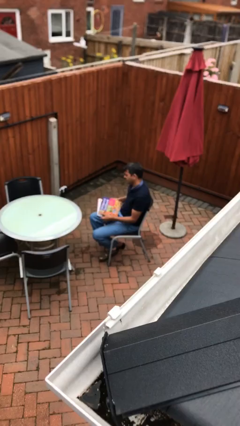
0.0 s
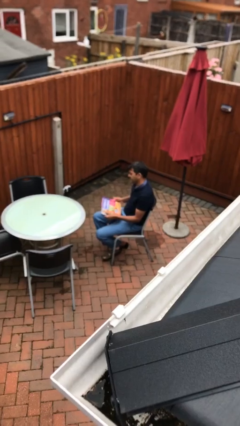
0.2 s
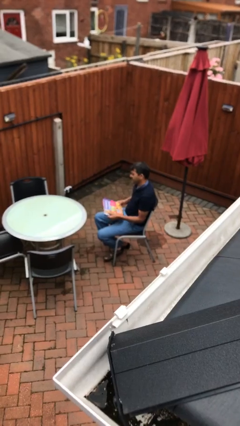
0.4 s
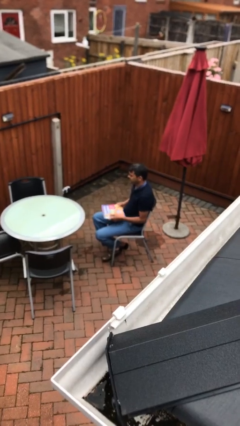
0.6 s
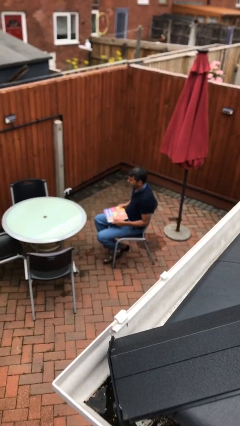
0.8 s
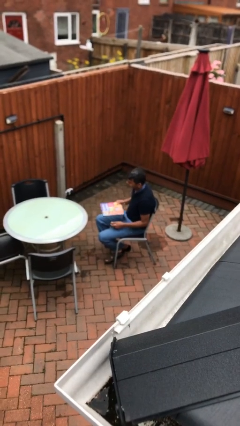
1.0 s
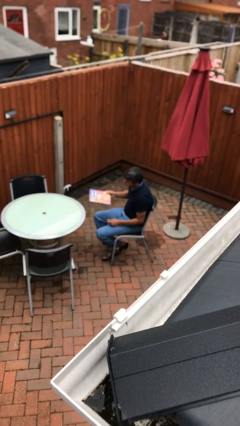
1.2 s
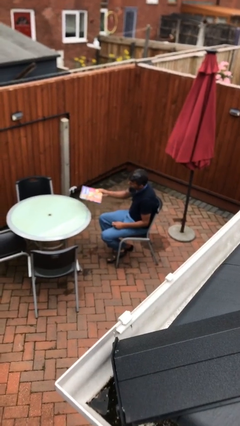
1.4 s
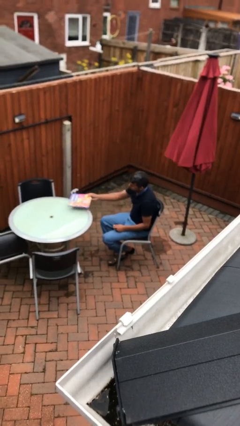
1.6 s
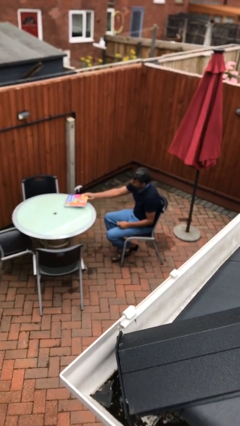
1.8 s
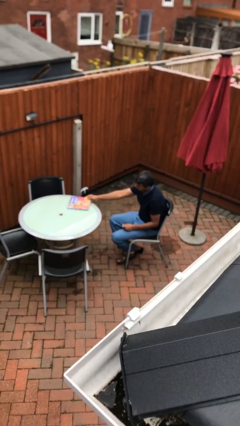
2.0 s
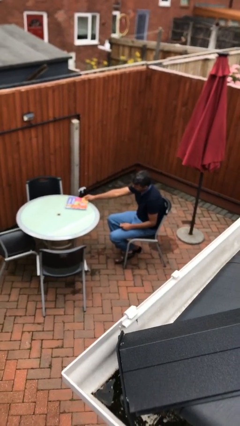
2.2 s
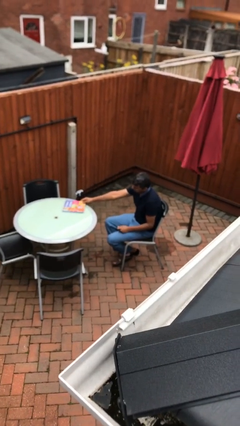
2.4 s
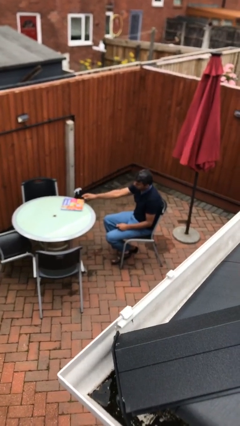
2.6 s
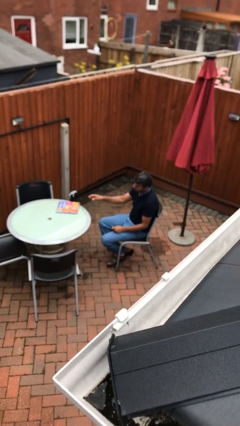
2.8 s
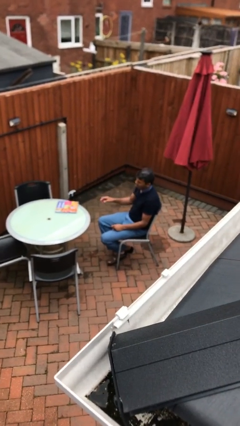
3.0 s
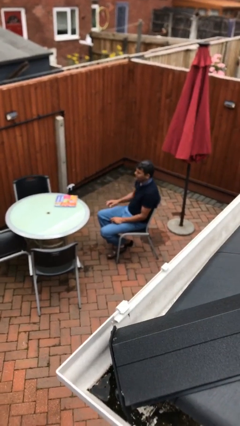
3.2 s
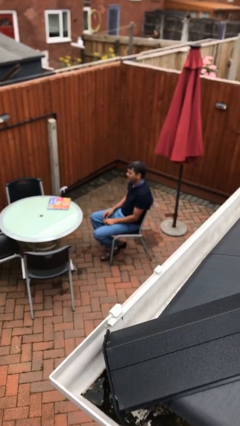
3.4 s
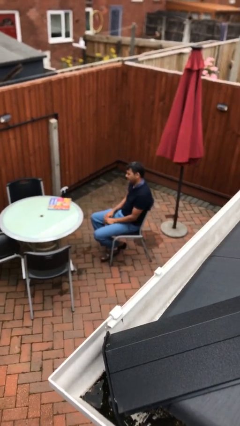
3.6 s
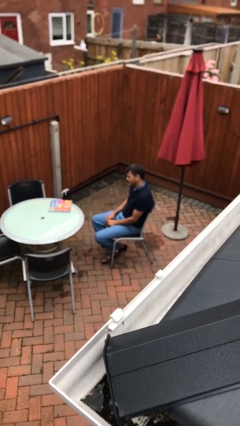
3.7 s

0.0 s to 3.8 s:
person puts down object on table

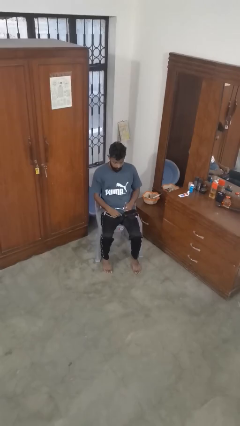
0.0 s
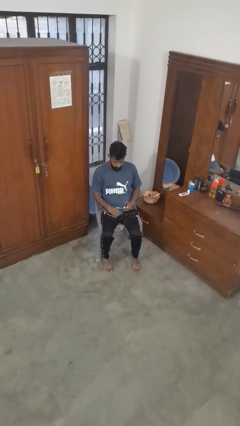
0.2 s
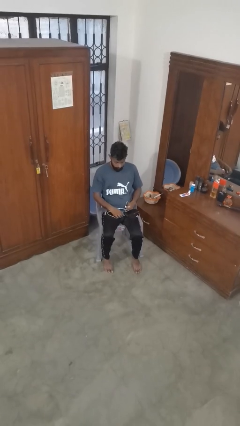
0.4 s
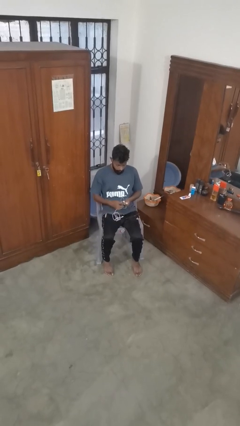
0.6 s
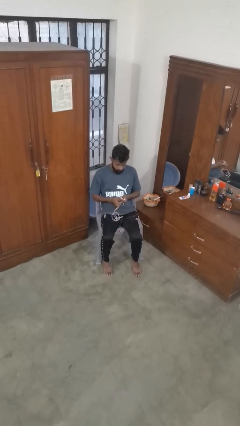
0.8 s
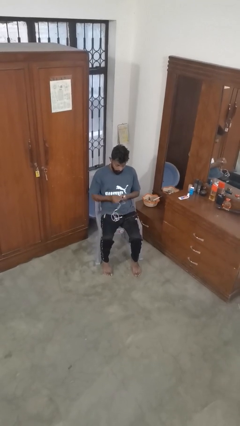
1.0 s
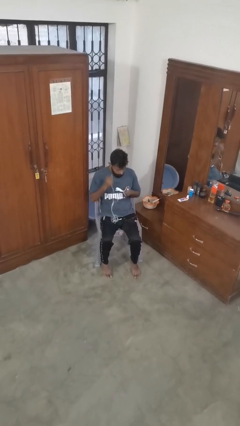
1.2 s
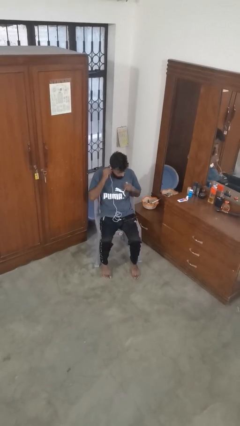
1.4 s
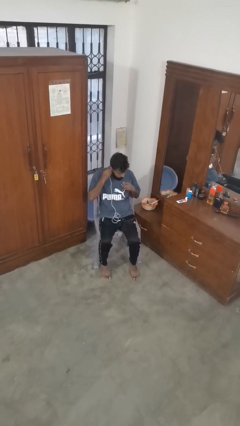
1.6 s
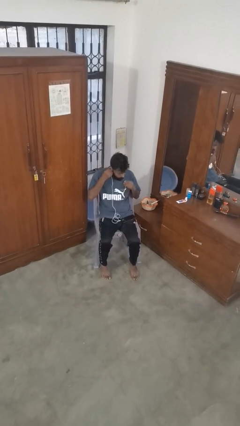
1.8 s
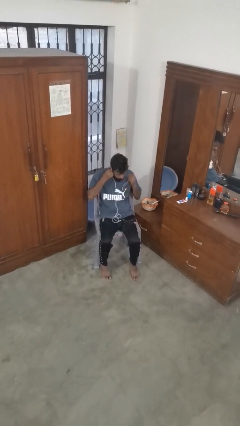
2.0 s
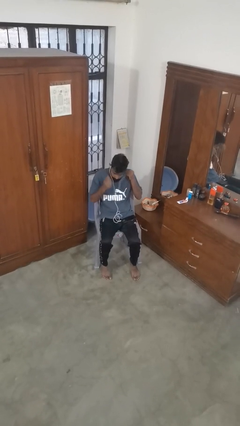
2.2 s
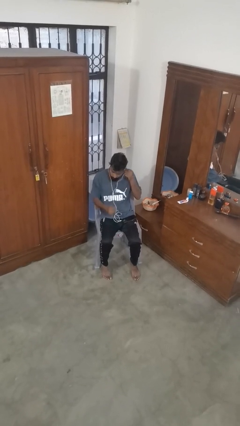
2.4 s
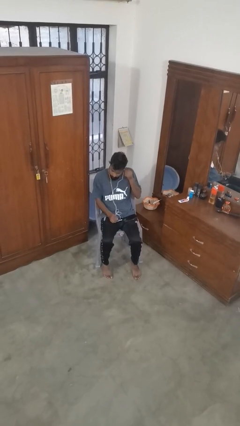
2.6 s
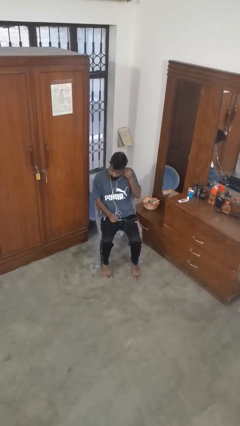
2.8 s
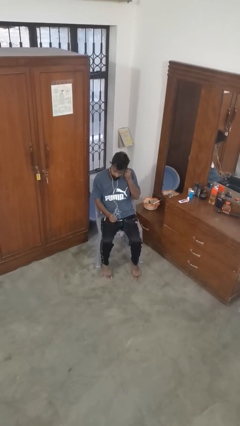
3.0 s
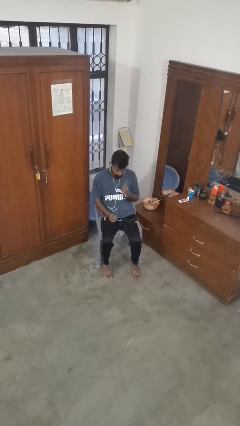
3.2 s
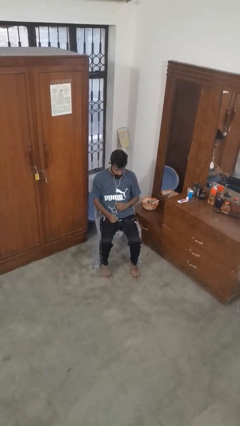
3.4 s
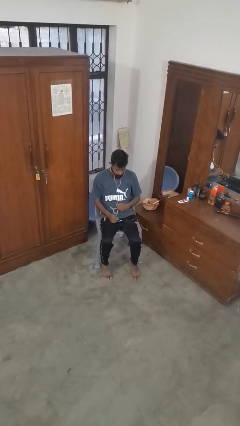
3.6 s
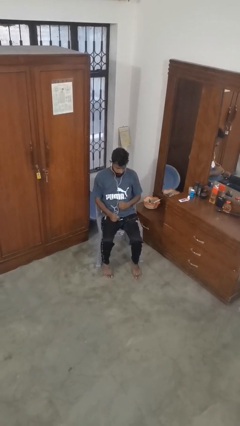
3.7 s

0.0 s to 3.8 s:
person puts on headphones

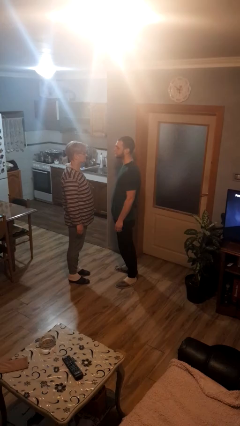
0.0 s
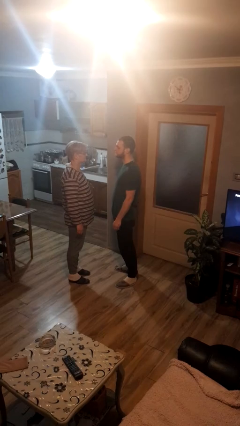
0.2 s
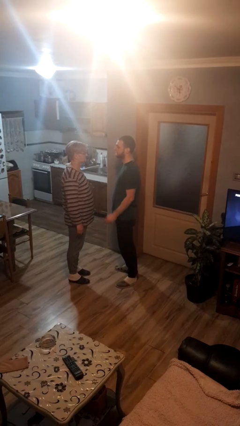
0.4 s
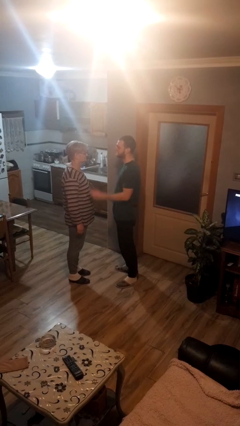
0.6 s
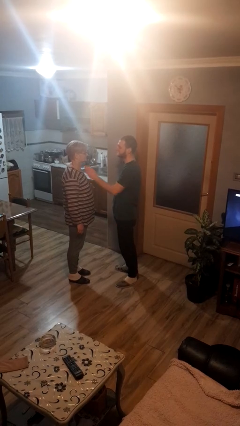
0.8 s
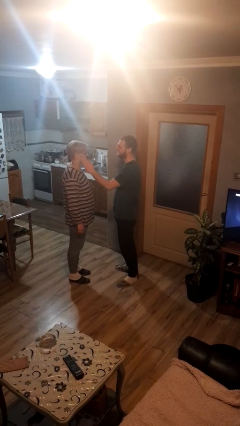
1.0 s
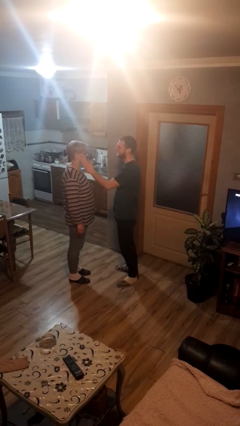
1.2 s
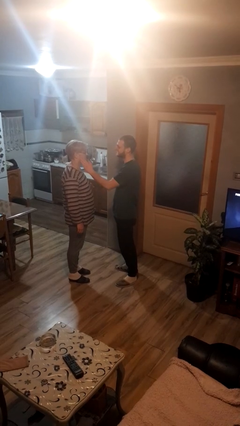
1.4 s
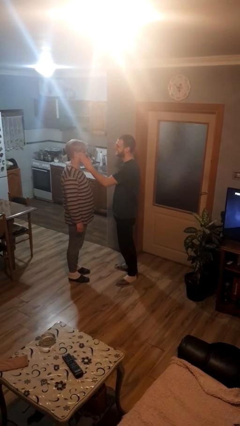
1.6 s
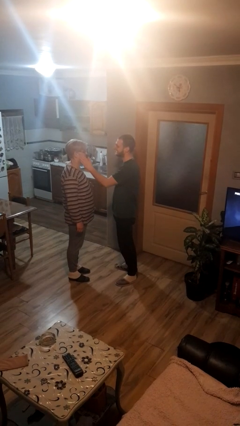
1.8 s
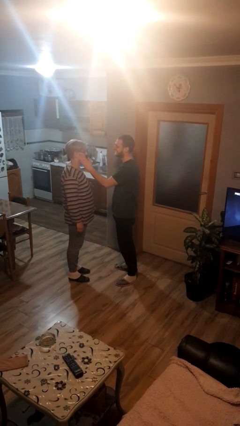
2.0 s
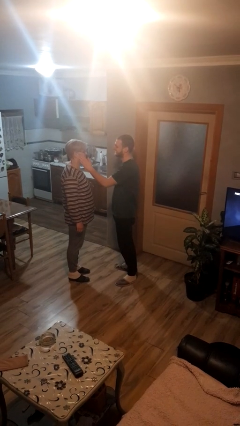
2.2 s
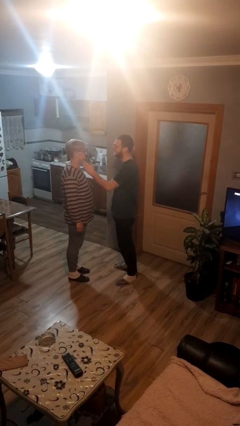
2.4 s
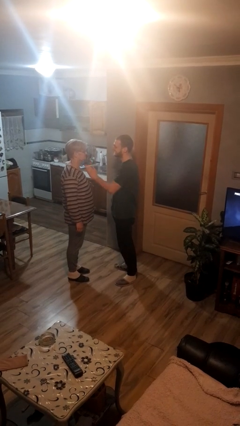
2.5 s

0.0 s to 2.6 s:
person touches face of person

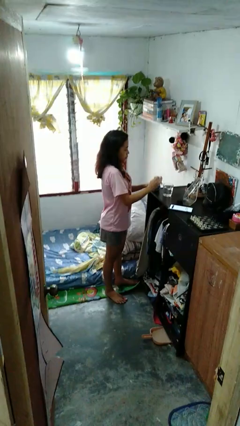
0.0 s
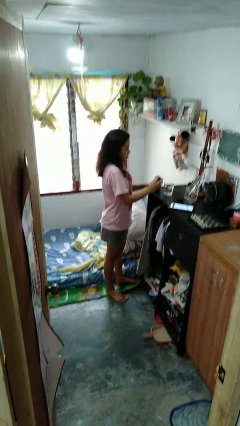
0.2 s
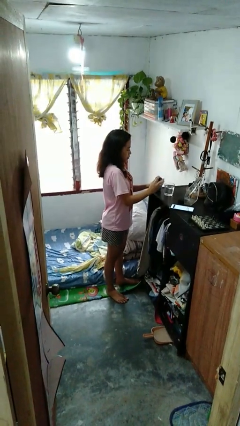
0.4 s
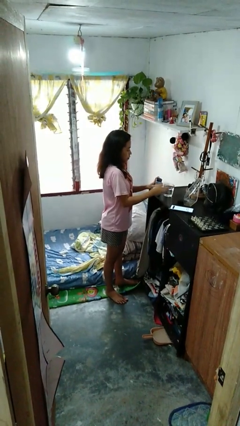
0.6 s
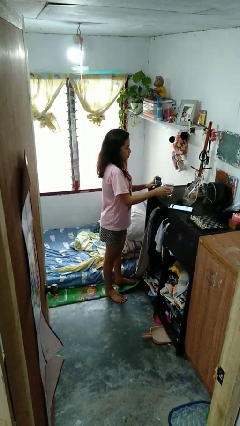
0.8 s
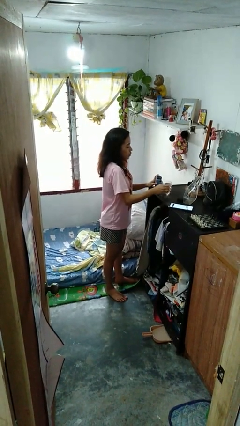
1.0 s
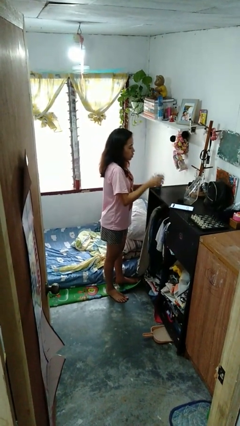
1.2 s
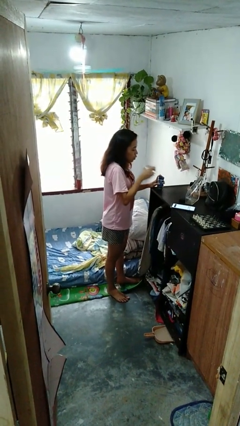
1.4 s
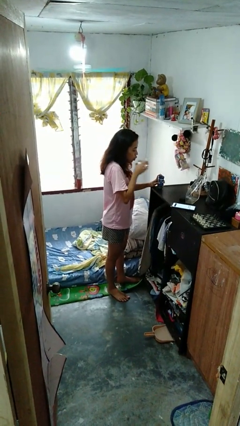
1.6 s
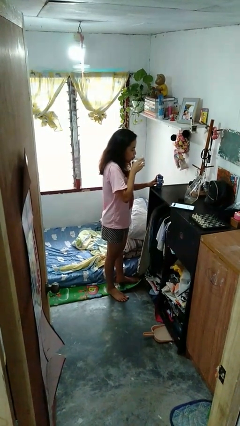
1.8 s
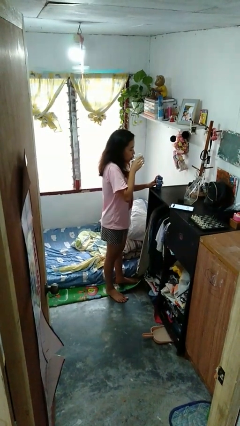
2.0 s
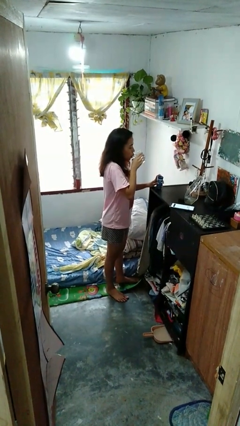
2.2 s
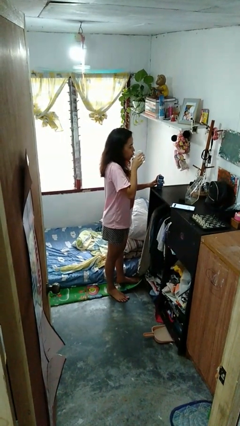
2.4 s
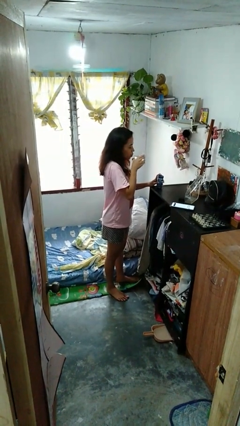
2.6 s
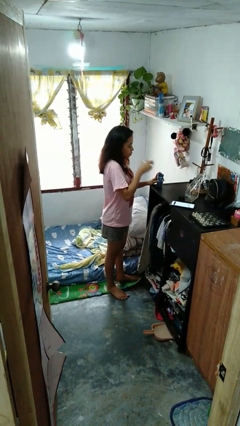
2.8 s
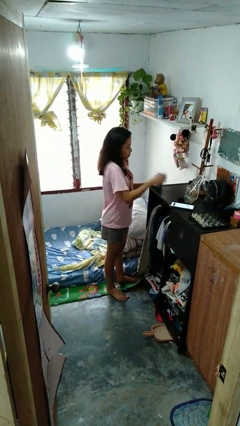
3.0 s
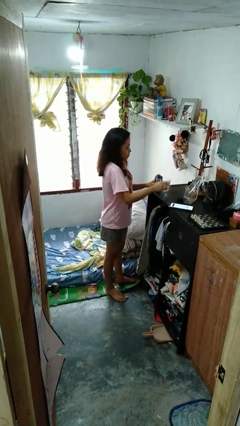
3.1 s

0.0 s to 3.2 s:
person drinks from cup

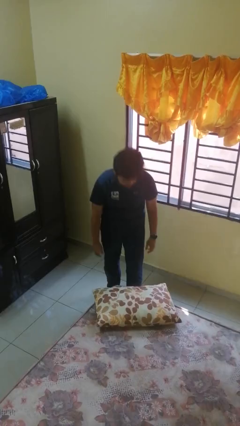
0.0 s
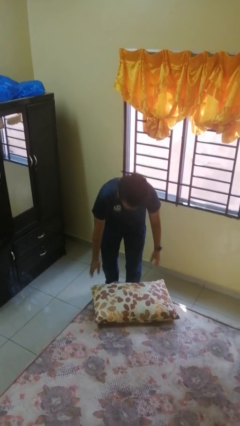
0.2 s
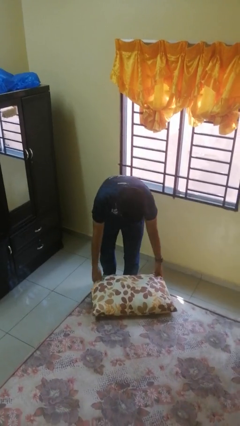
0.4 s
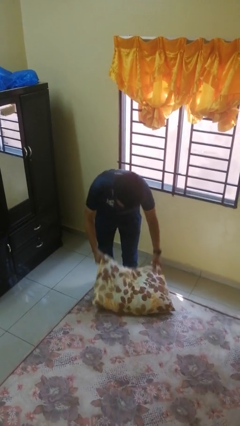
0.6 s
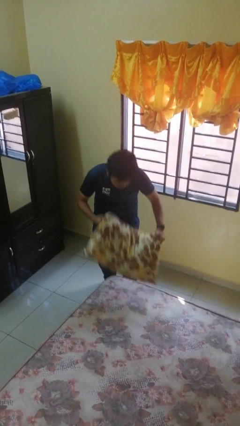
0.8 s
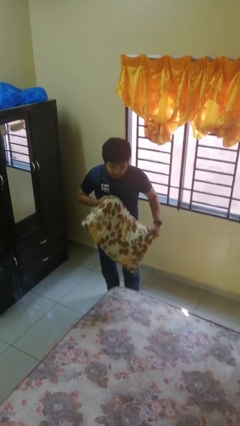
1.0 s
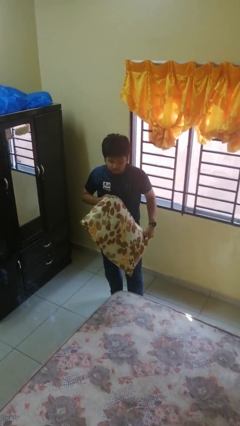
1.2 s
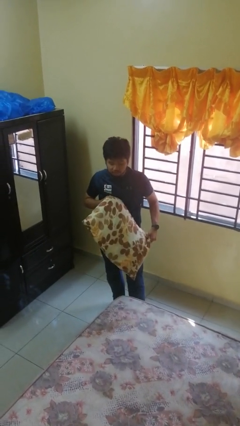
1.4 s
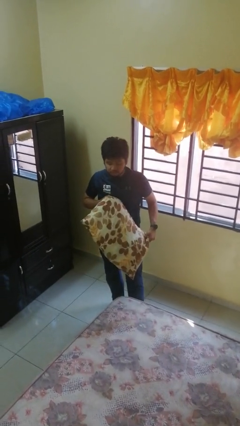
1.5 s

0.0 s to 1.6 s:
person picks up object from bed

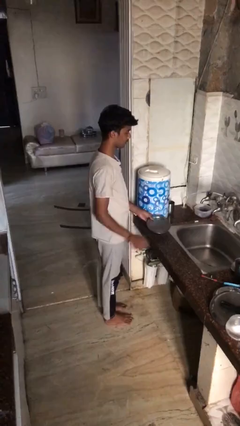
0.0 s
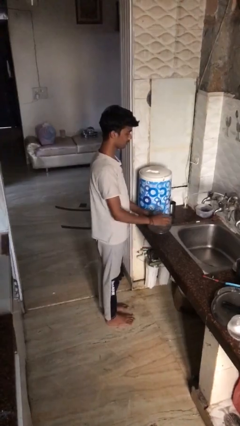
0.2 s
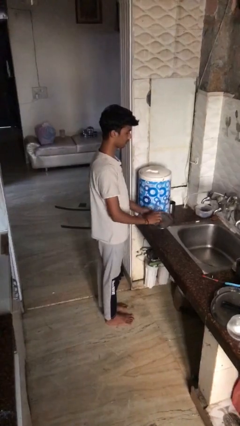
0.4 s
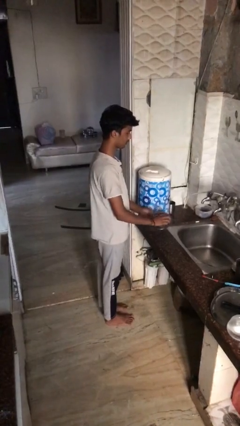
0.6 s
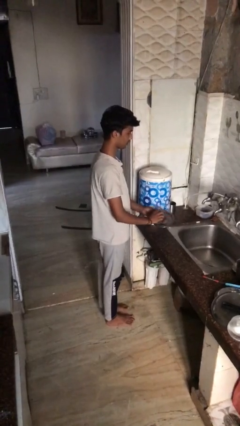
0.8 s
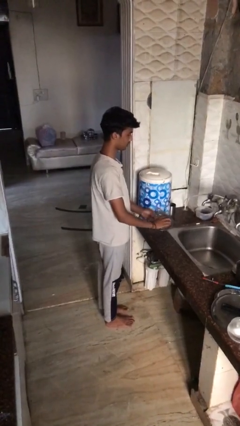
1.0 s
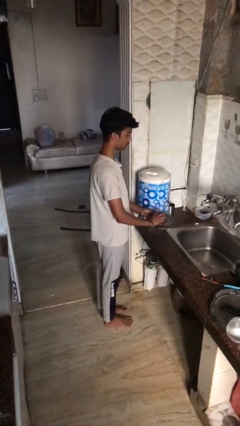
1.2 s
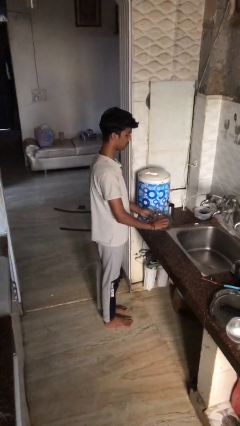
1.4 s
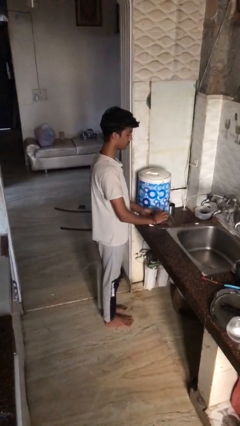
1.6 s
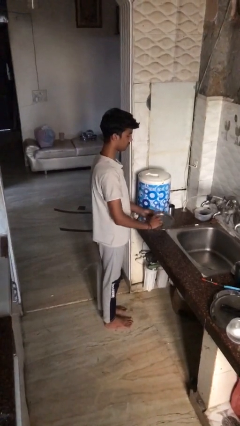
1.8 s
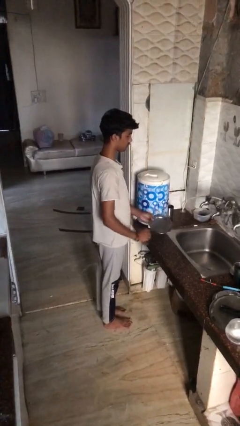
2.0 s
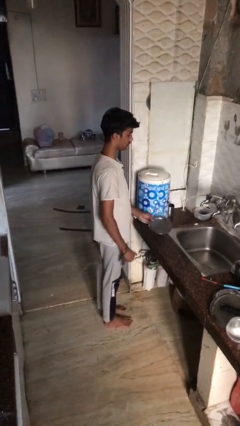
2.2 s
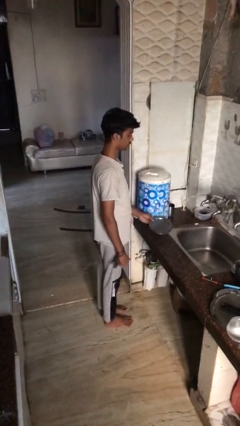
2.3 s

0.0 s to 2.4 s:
person dries dish
